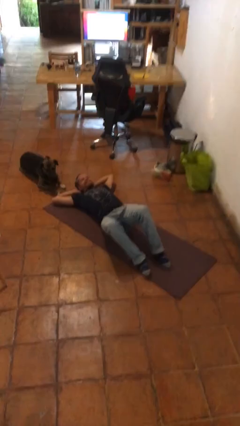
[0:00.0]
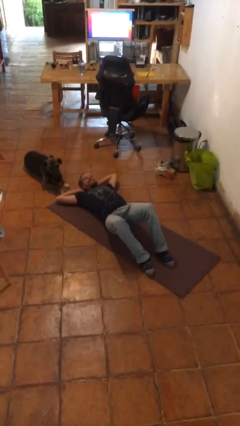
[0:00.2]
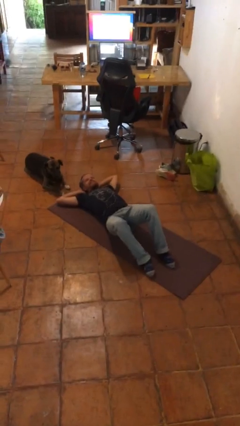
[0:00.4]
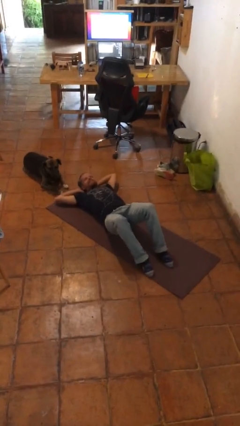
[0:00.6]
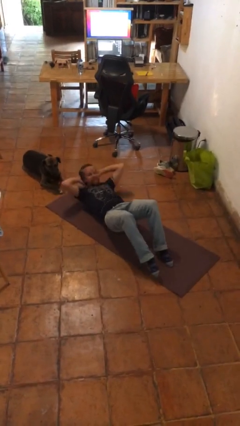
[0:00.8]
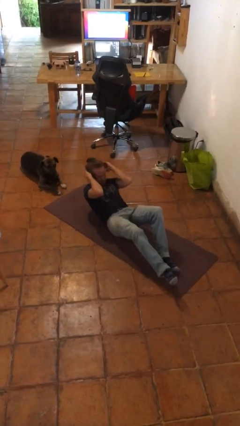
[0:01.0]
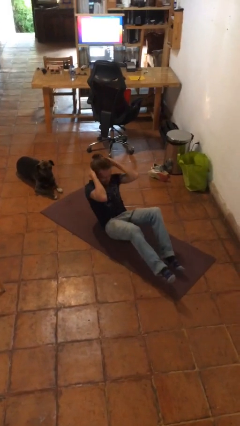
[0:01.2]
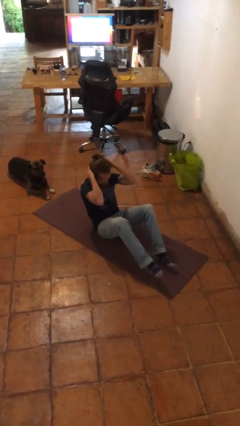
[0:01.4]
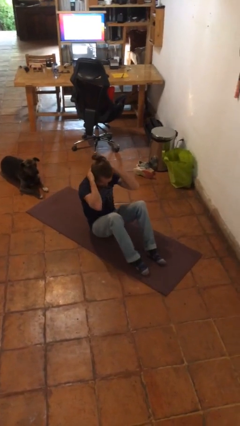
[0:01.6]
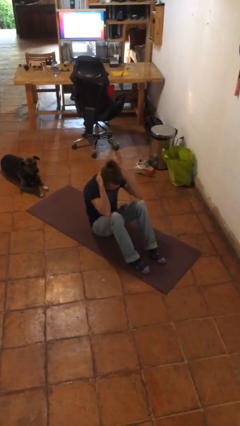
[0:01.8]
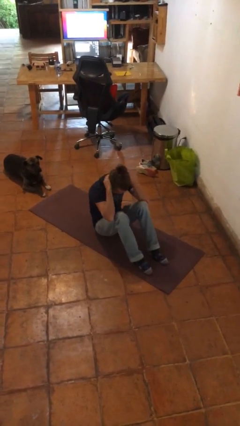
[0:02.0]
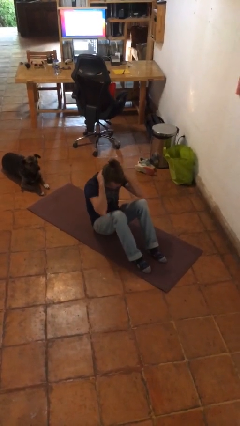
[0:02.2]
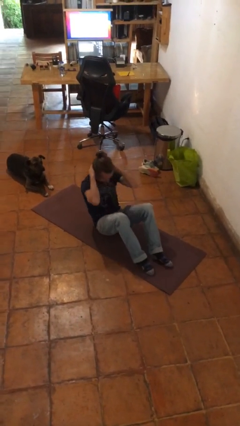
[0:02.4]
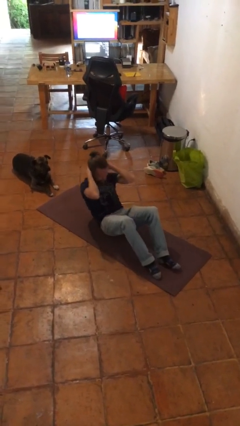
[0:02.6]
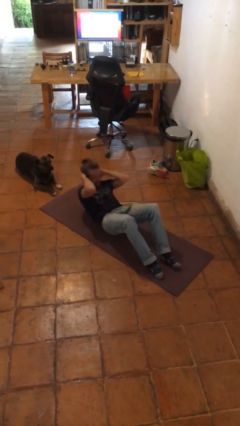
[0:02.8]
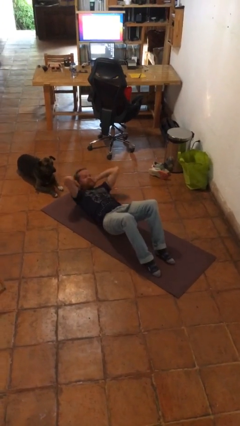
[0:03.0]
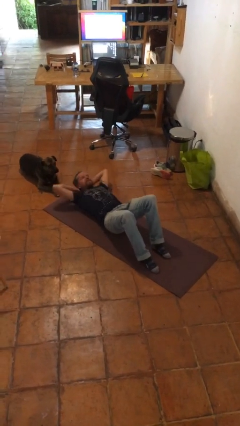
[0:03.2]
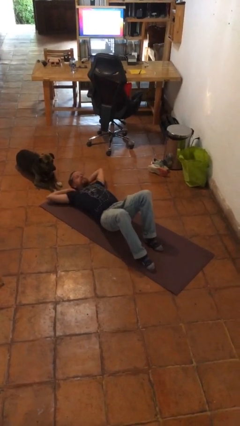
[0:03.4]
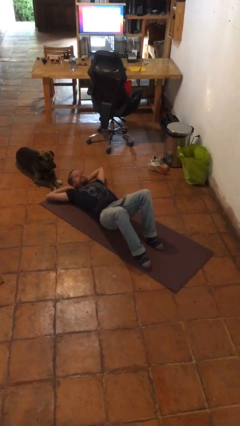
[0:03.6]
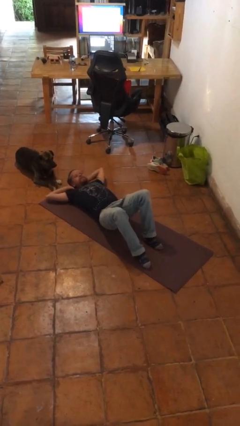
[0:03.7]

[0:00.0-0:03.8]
person exercises with situp

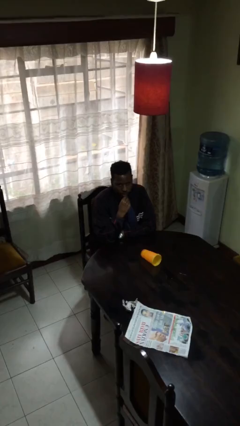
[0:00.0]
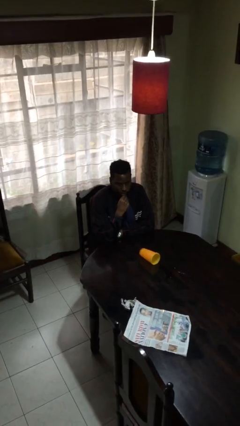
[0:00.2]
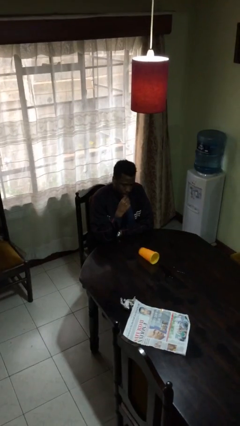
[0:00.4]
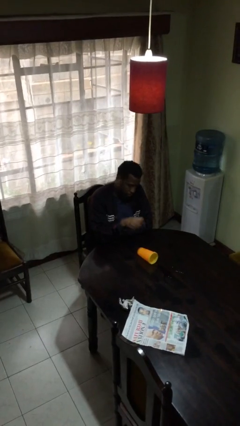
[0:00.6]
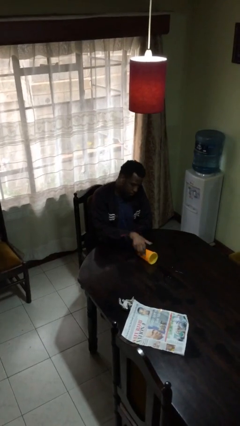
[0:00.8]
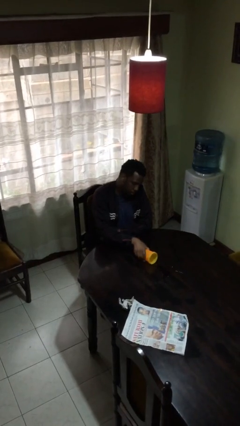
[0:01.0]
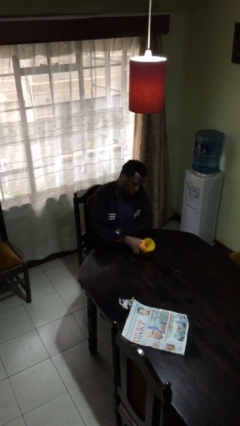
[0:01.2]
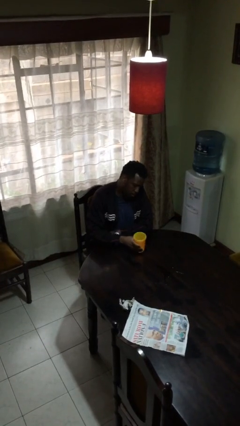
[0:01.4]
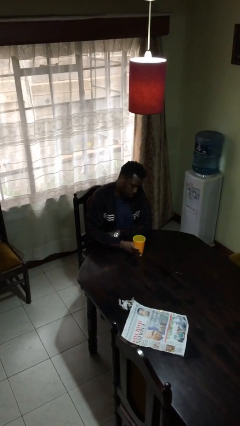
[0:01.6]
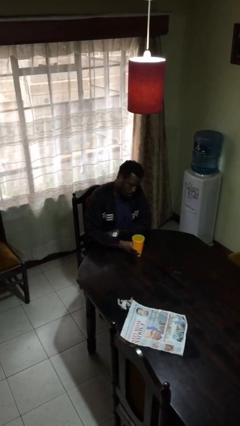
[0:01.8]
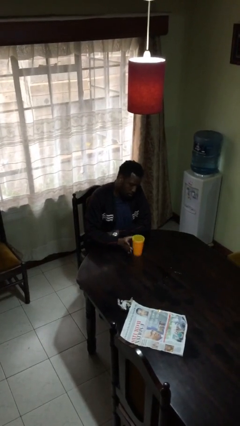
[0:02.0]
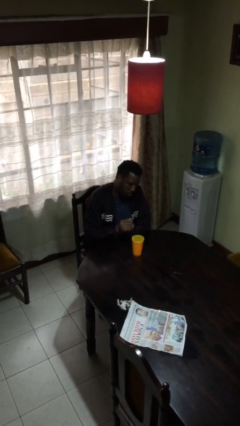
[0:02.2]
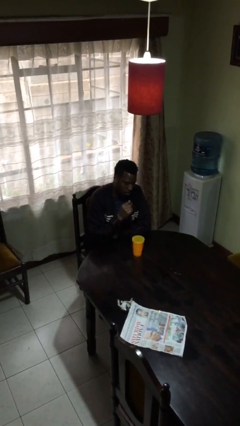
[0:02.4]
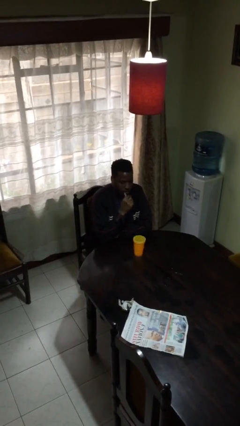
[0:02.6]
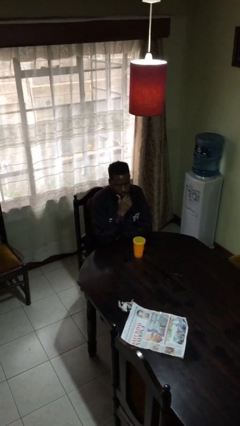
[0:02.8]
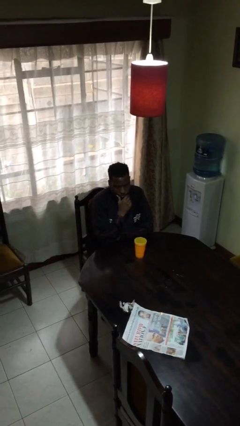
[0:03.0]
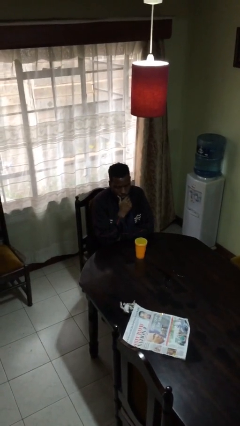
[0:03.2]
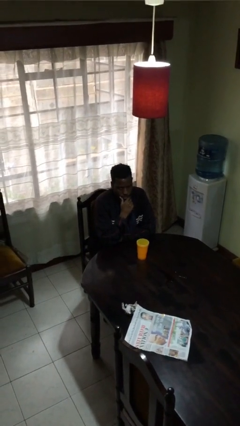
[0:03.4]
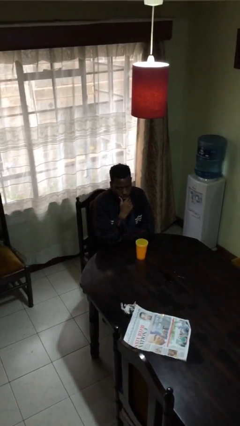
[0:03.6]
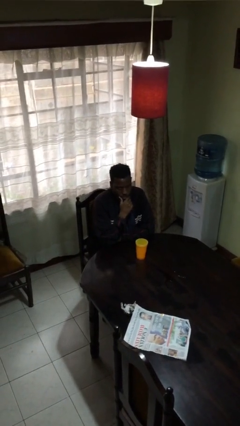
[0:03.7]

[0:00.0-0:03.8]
person sets upright glass

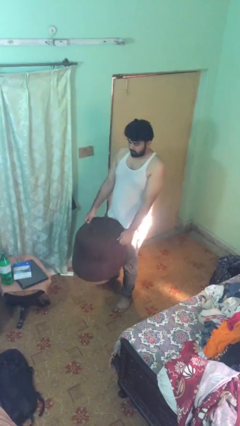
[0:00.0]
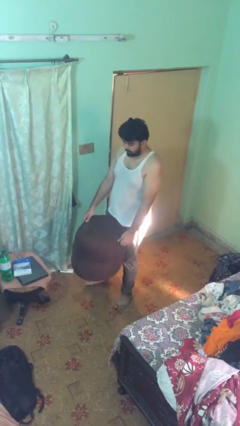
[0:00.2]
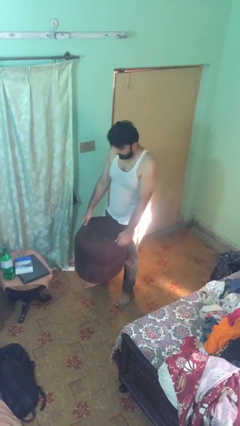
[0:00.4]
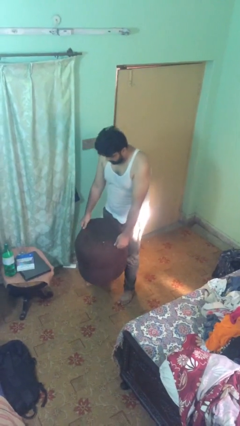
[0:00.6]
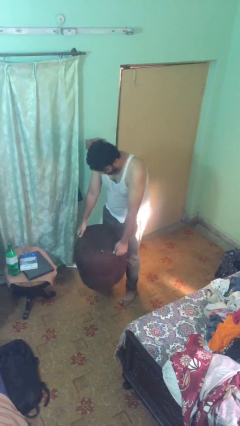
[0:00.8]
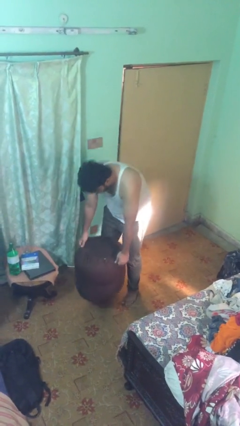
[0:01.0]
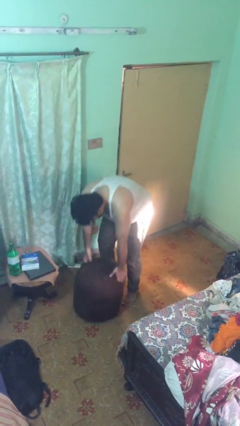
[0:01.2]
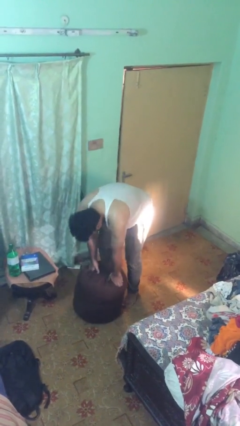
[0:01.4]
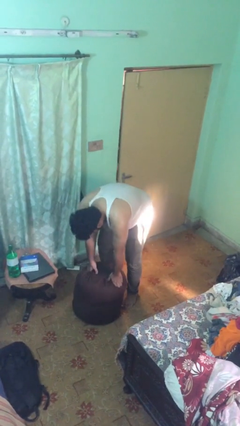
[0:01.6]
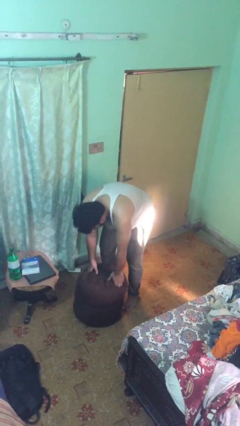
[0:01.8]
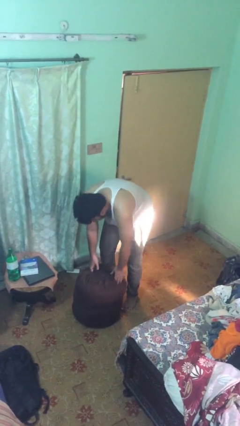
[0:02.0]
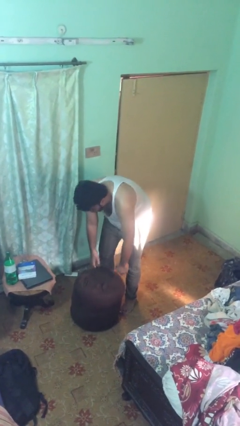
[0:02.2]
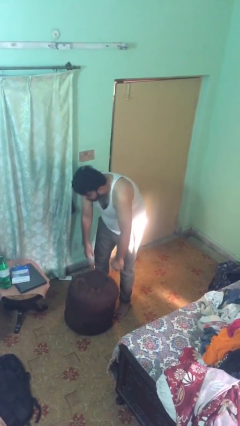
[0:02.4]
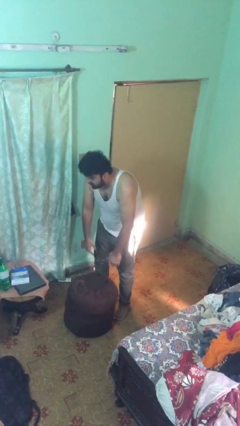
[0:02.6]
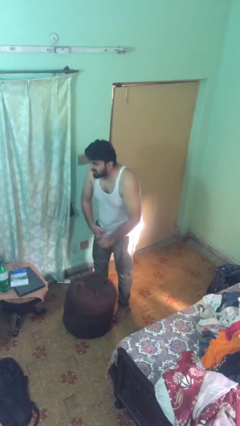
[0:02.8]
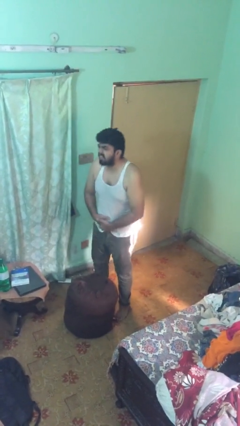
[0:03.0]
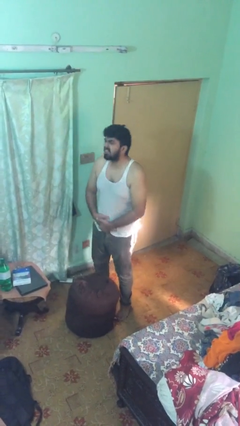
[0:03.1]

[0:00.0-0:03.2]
person puts down object on floor

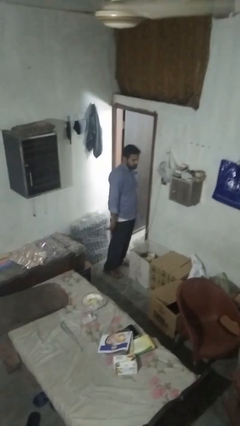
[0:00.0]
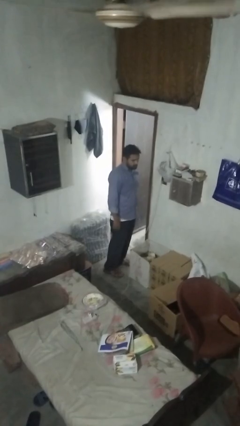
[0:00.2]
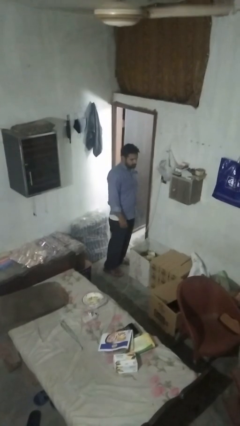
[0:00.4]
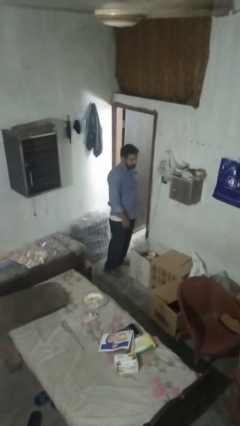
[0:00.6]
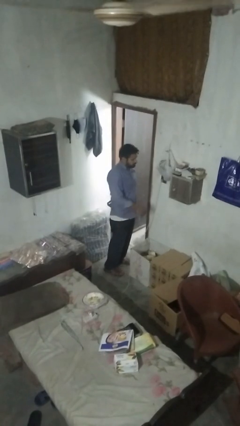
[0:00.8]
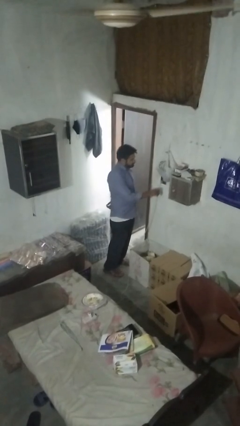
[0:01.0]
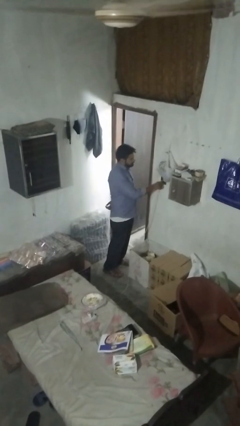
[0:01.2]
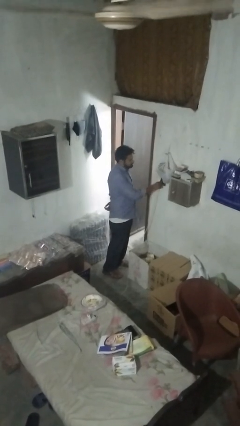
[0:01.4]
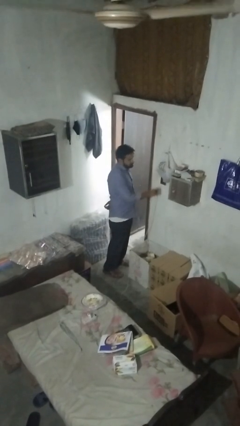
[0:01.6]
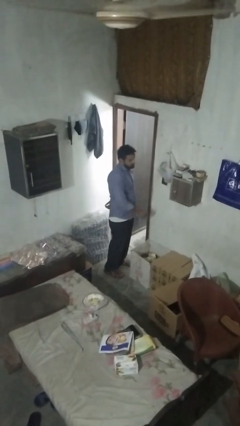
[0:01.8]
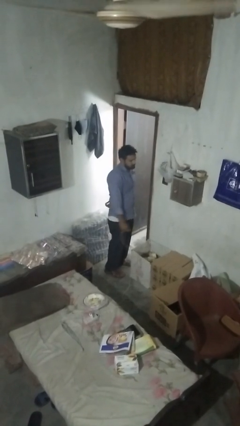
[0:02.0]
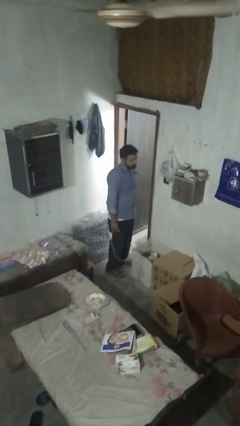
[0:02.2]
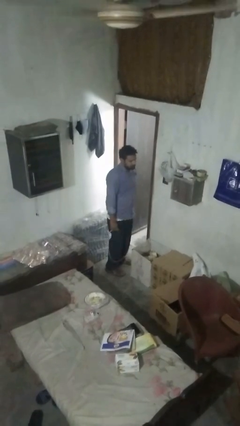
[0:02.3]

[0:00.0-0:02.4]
person unplugs from electrical socket

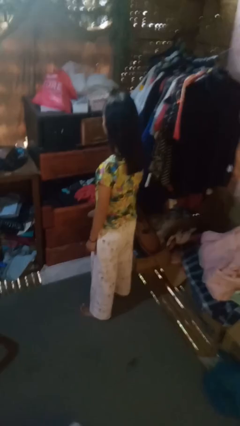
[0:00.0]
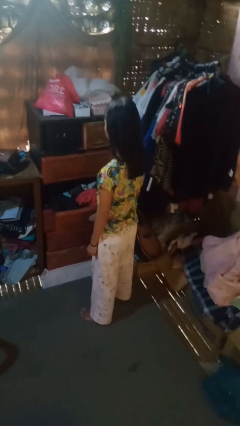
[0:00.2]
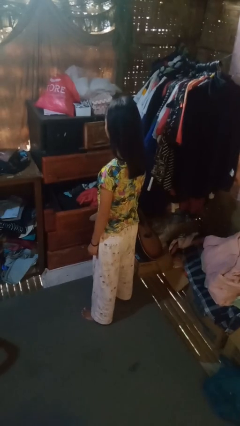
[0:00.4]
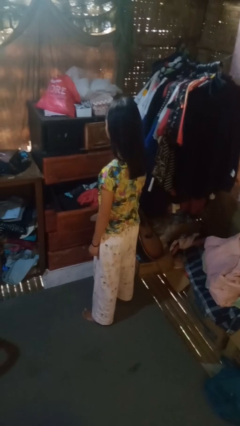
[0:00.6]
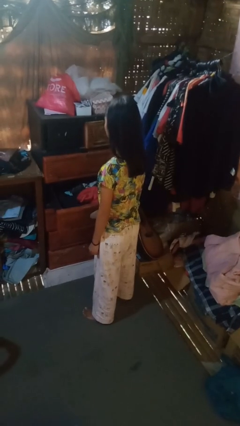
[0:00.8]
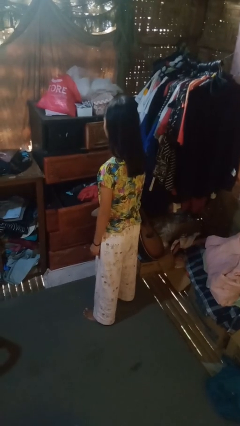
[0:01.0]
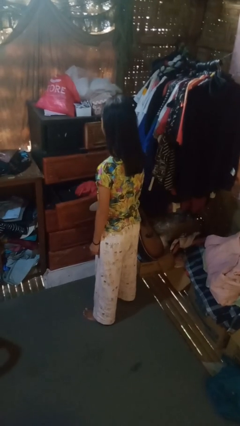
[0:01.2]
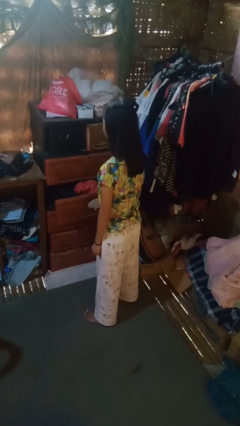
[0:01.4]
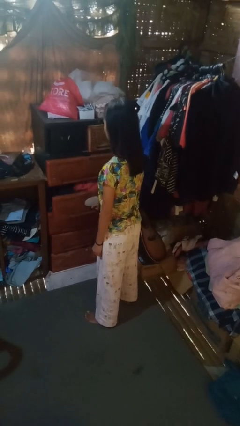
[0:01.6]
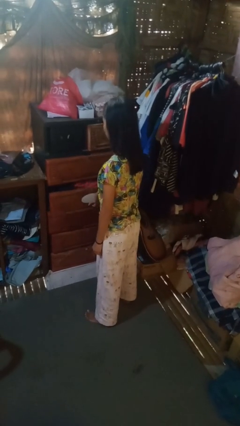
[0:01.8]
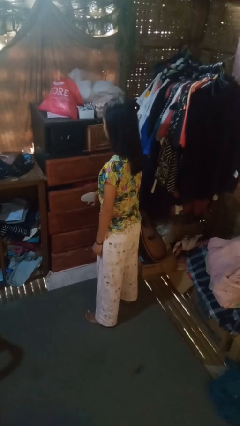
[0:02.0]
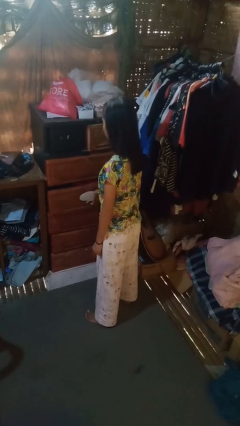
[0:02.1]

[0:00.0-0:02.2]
person closes dresser drawer

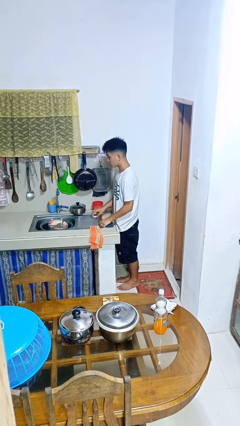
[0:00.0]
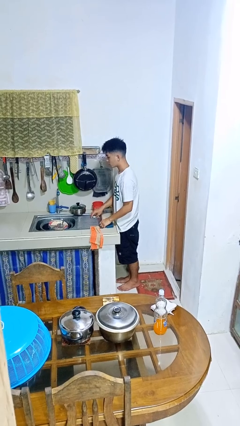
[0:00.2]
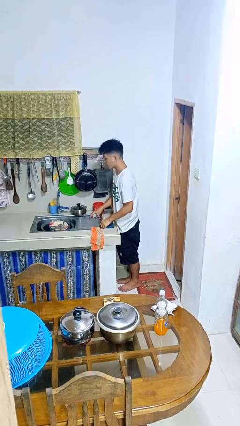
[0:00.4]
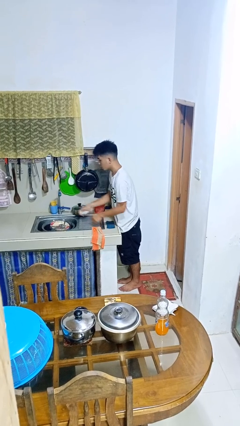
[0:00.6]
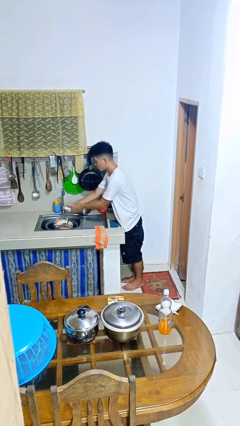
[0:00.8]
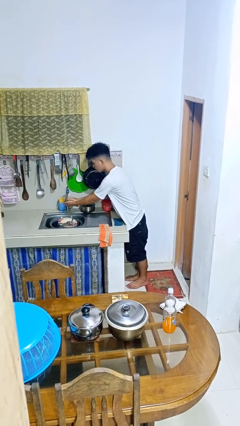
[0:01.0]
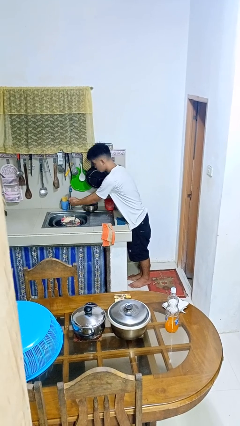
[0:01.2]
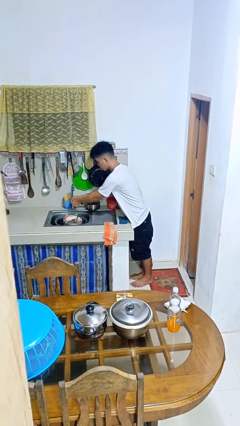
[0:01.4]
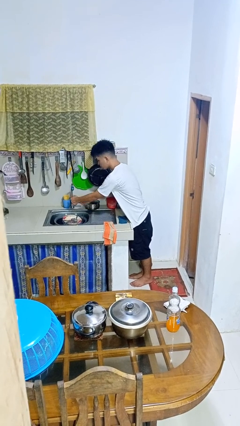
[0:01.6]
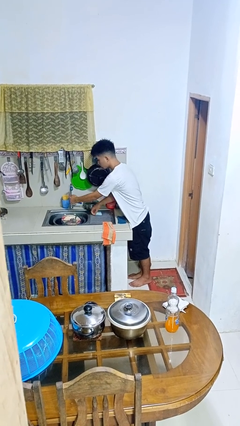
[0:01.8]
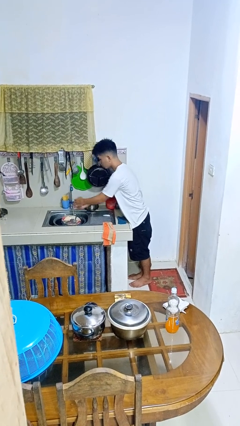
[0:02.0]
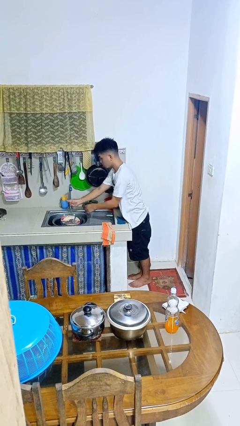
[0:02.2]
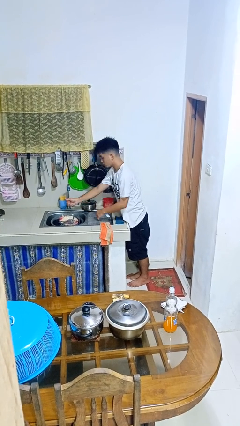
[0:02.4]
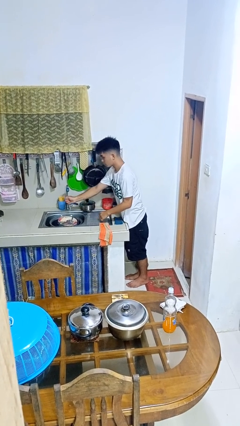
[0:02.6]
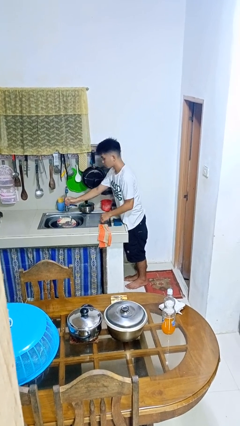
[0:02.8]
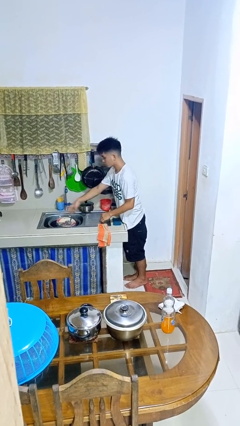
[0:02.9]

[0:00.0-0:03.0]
person washes hands
